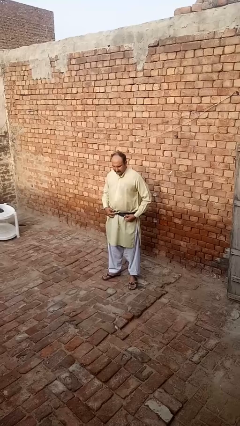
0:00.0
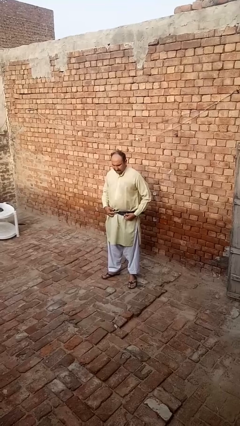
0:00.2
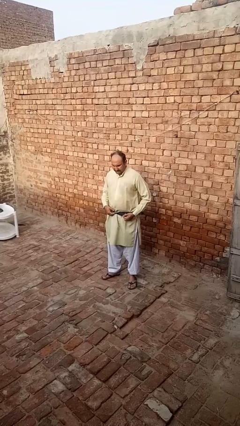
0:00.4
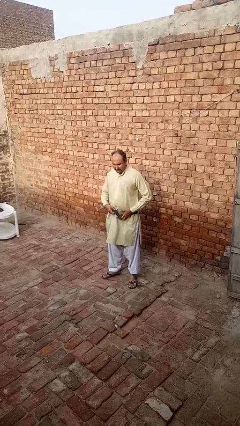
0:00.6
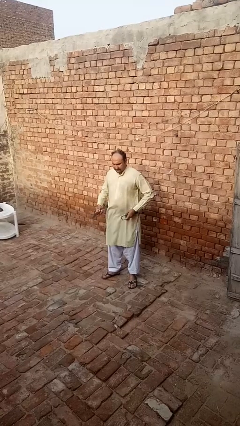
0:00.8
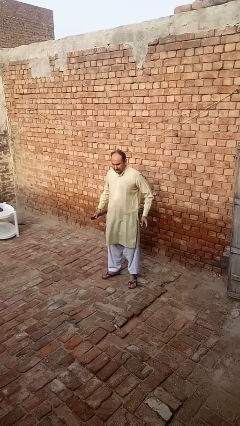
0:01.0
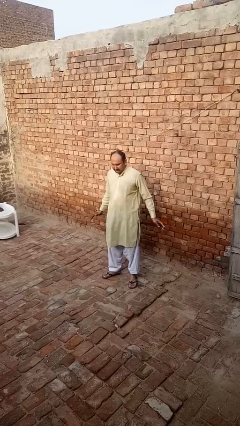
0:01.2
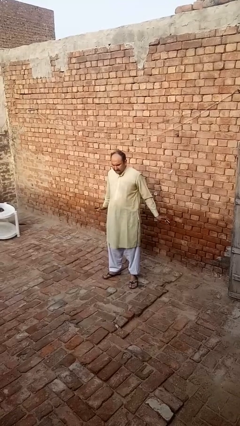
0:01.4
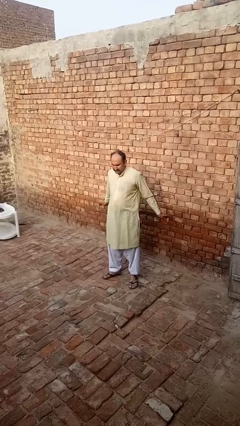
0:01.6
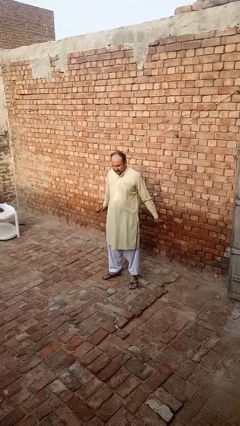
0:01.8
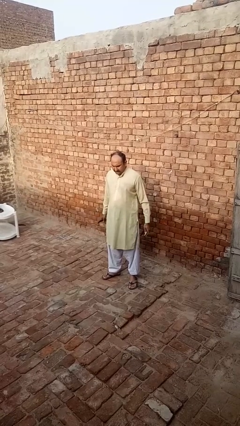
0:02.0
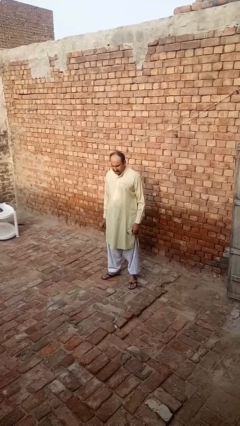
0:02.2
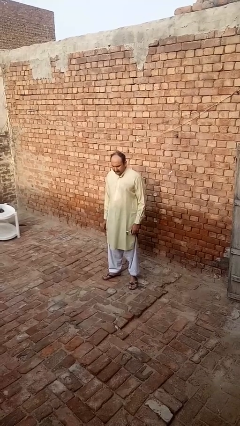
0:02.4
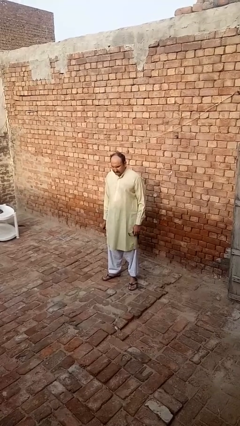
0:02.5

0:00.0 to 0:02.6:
person takes off belt

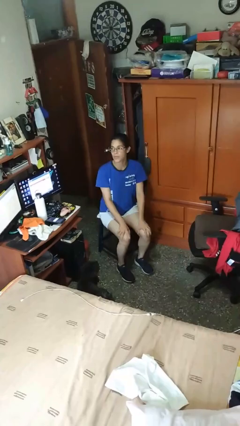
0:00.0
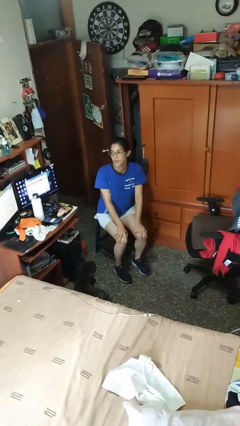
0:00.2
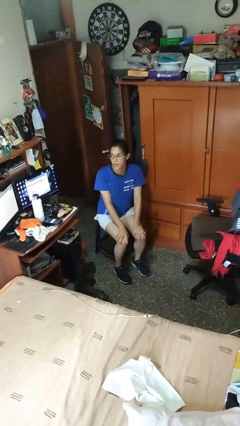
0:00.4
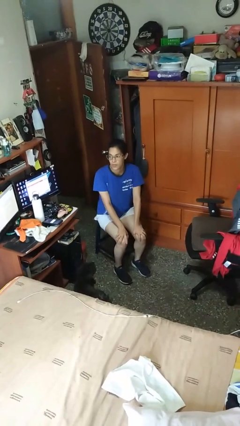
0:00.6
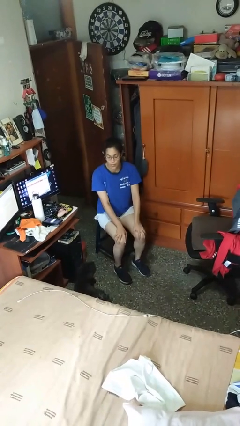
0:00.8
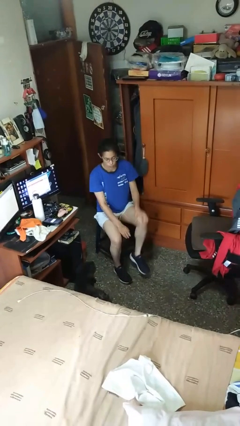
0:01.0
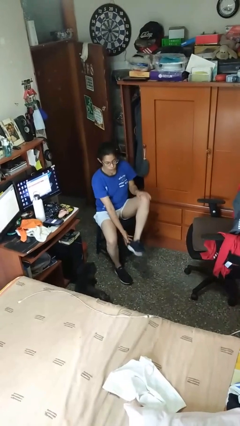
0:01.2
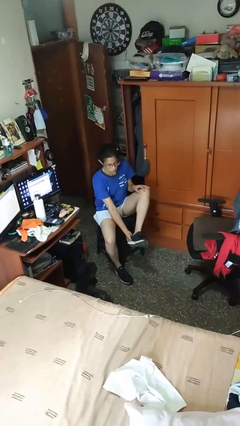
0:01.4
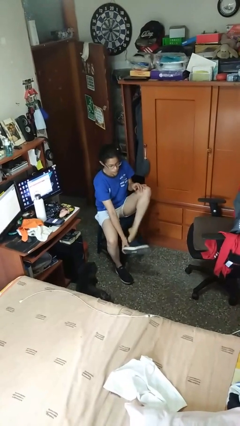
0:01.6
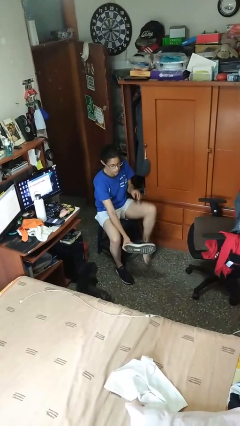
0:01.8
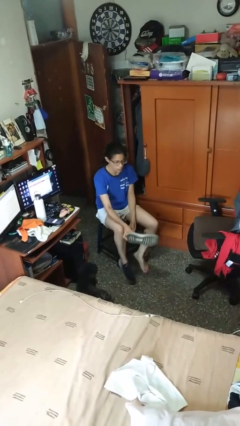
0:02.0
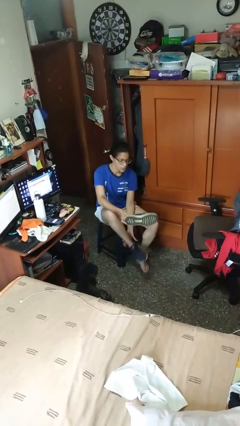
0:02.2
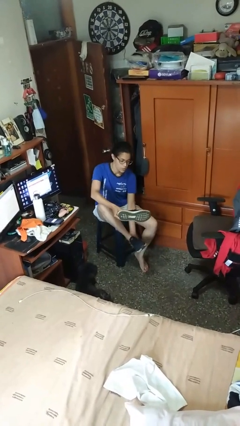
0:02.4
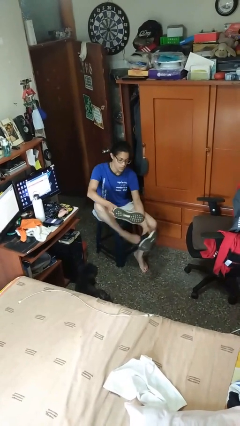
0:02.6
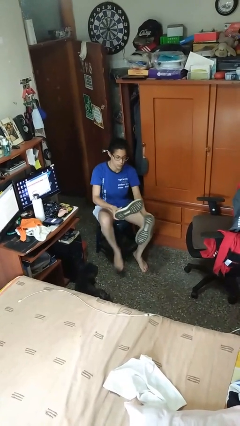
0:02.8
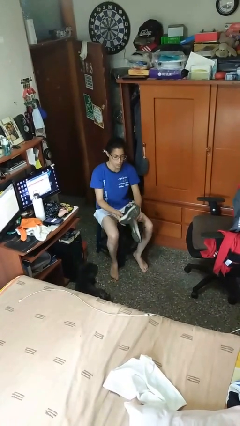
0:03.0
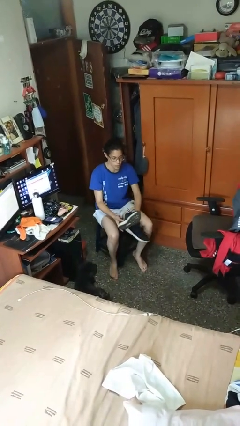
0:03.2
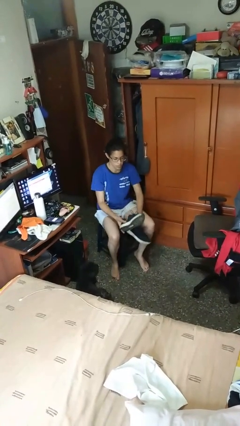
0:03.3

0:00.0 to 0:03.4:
person takes off shoes

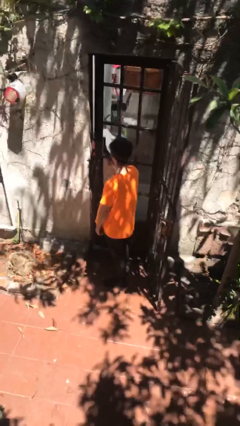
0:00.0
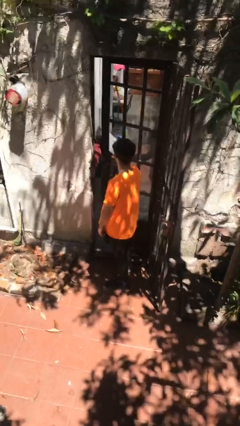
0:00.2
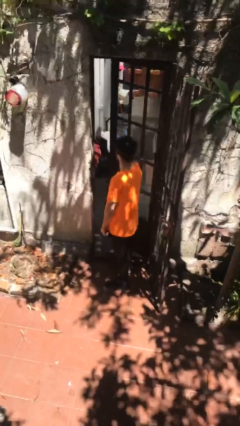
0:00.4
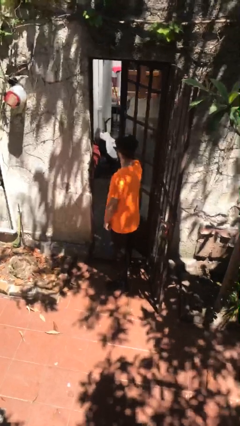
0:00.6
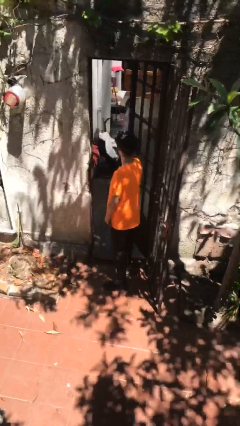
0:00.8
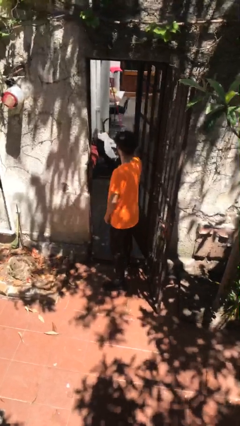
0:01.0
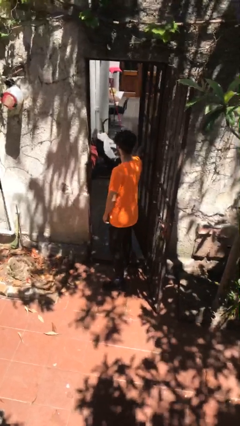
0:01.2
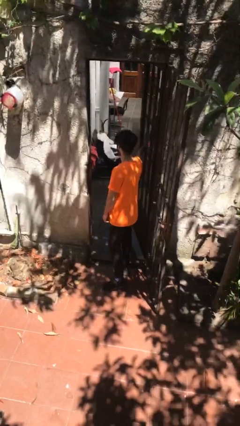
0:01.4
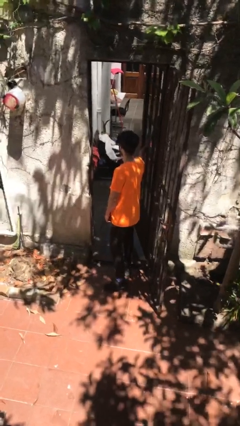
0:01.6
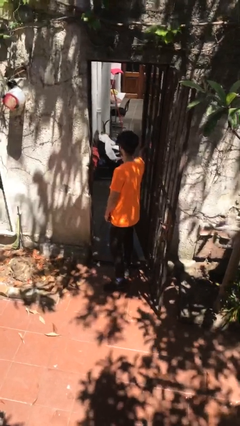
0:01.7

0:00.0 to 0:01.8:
person opens facility door

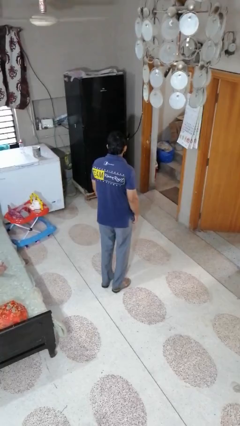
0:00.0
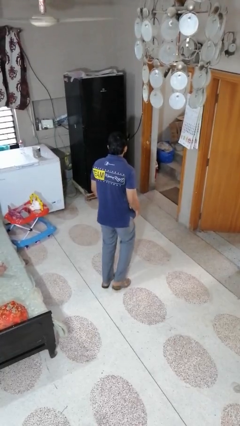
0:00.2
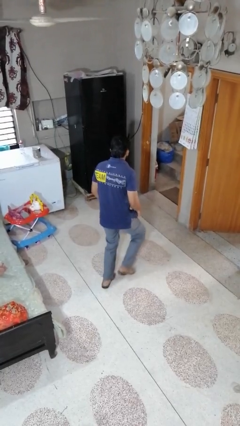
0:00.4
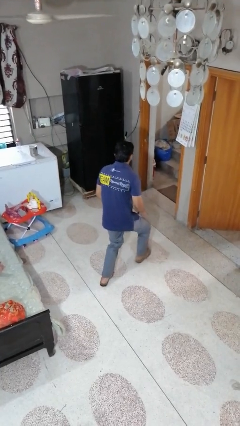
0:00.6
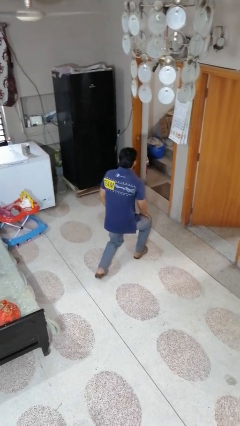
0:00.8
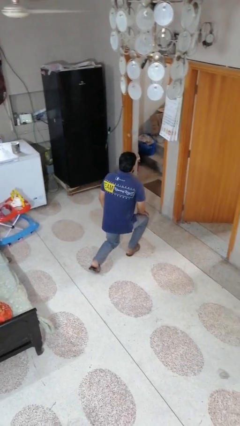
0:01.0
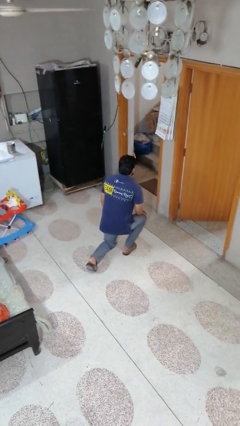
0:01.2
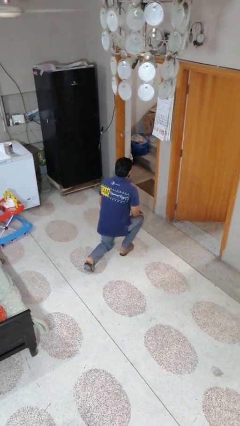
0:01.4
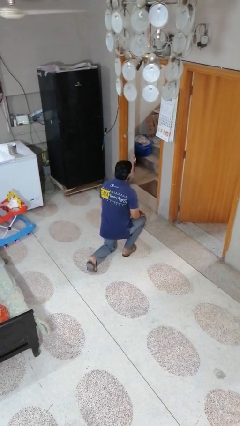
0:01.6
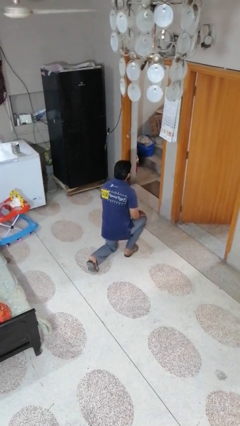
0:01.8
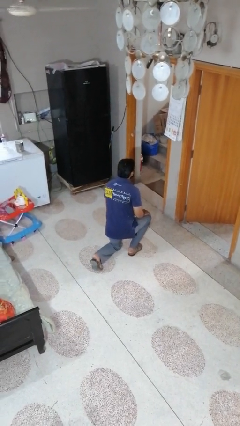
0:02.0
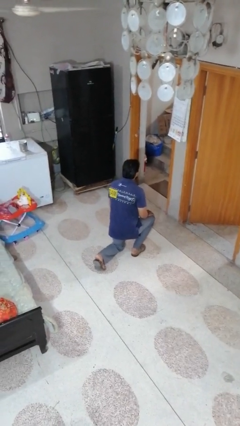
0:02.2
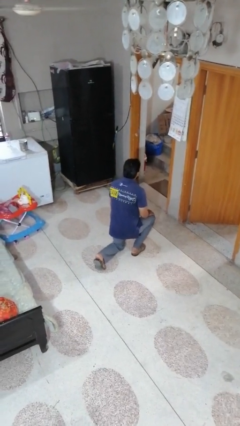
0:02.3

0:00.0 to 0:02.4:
person kneels

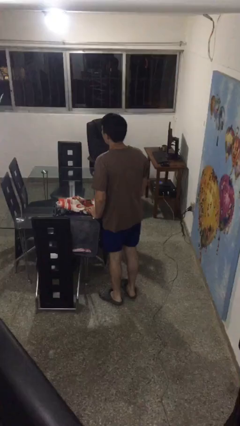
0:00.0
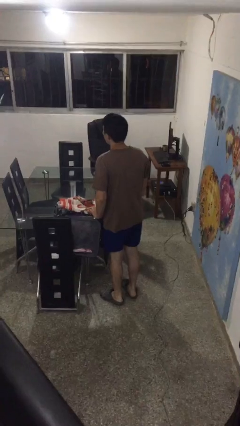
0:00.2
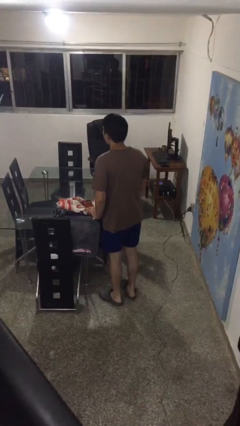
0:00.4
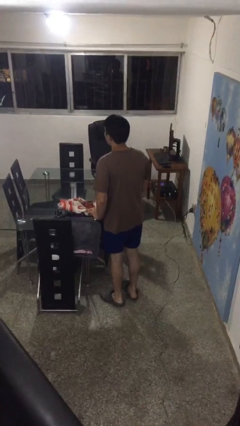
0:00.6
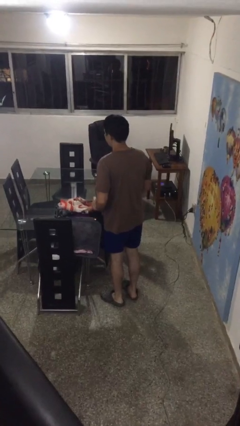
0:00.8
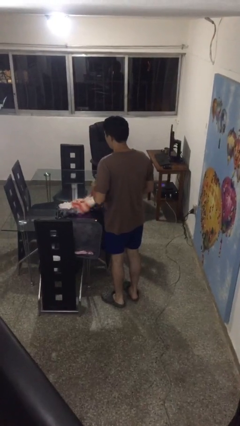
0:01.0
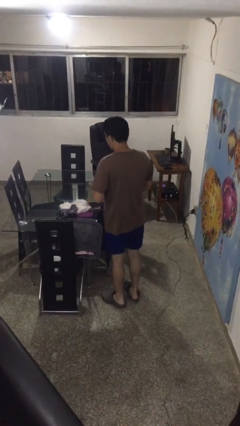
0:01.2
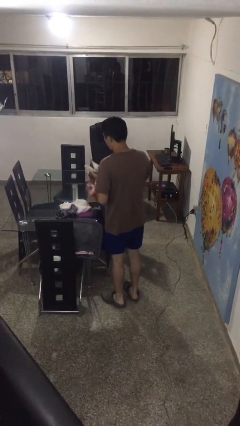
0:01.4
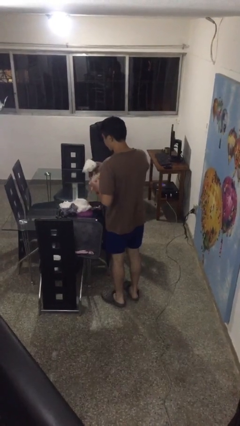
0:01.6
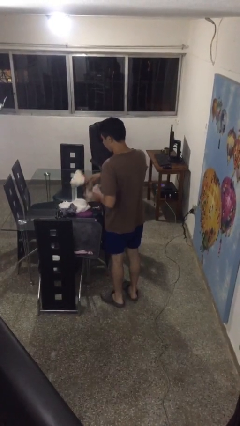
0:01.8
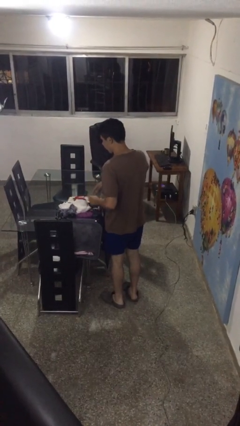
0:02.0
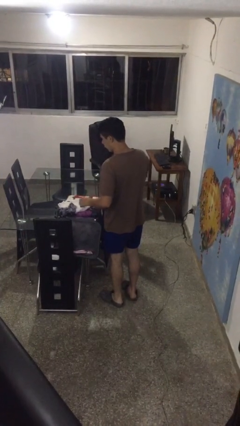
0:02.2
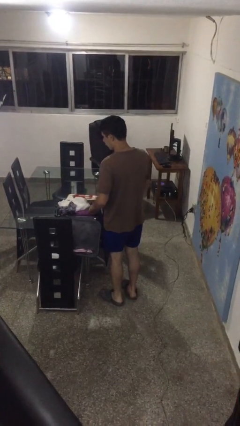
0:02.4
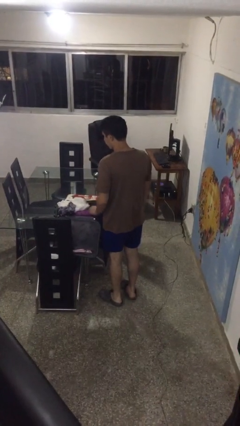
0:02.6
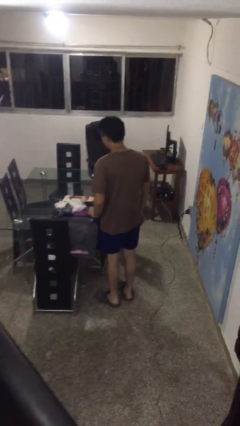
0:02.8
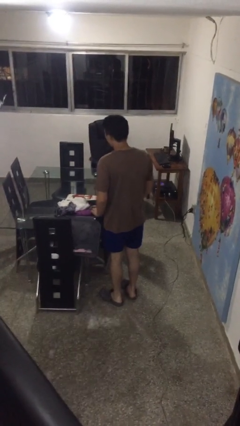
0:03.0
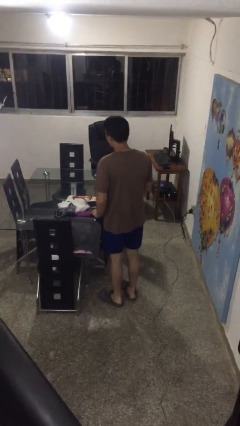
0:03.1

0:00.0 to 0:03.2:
person unloads clothes from suitcase

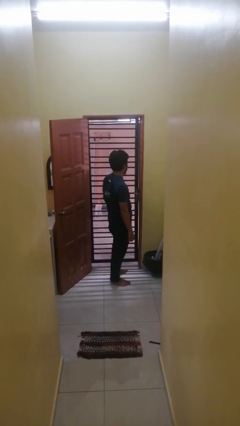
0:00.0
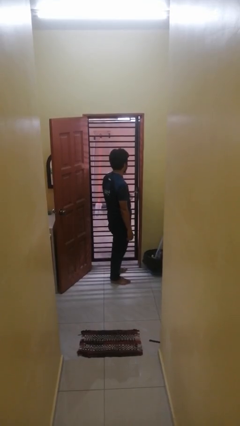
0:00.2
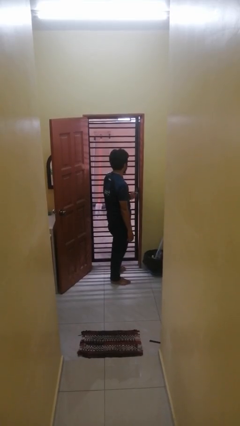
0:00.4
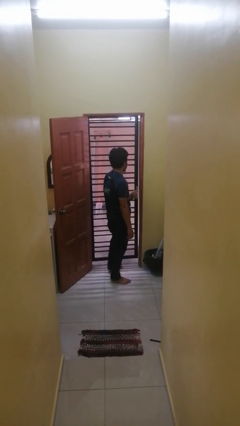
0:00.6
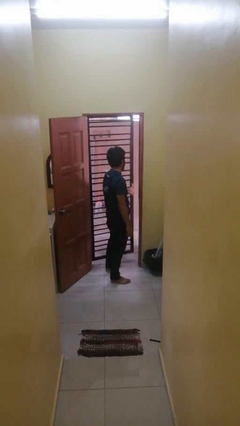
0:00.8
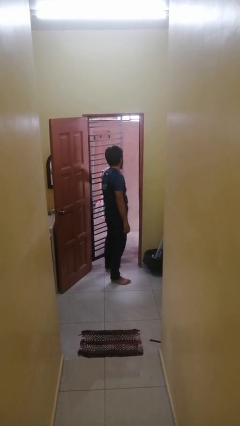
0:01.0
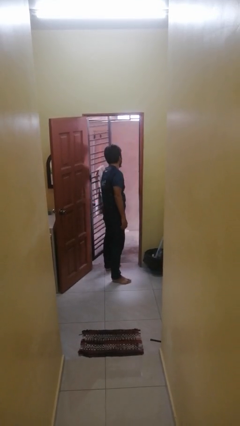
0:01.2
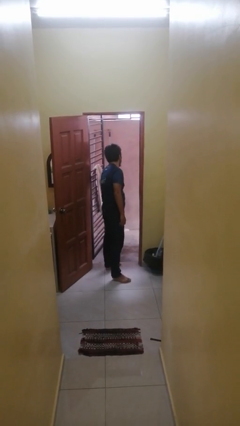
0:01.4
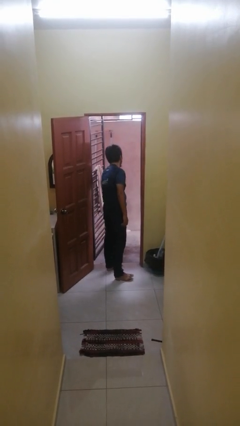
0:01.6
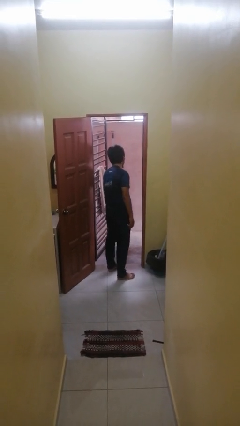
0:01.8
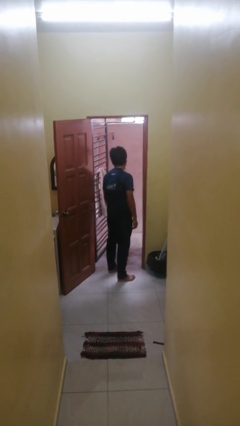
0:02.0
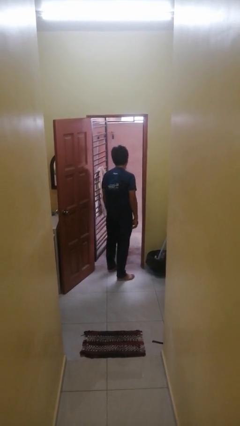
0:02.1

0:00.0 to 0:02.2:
person opens gate

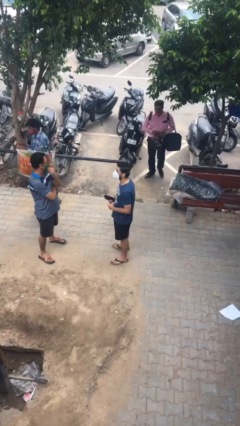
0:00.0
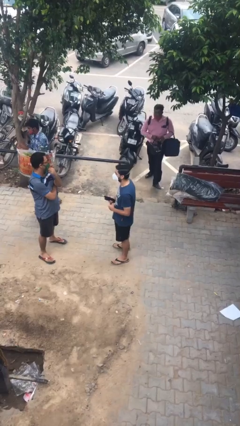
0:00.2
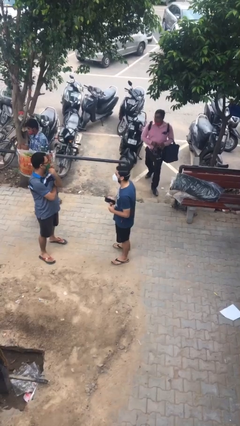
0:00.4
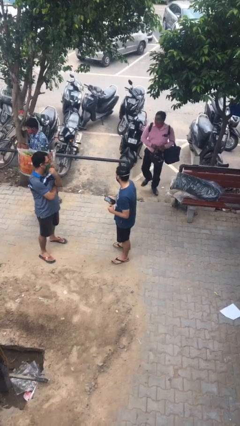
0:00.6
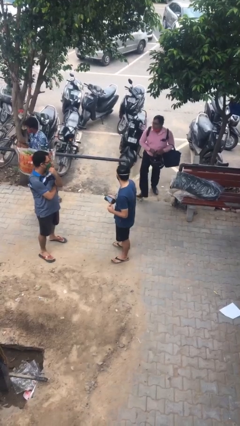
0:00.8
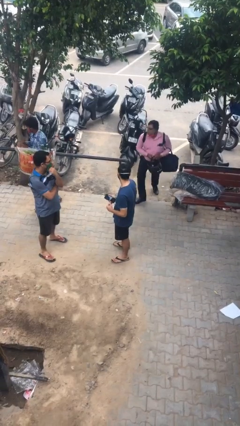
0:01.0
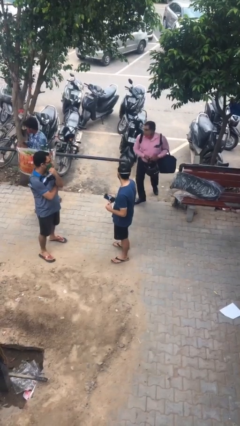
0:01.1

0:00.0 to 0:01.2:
person talks to person

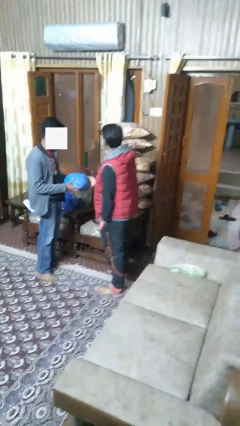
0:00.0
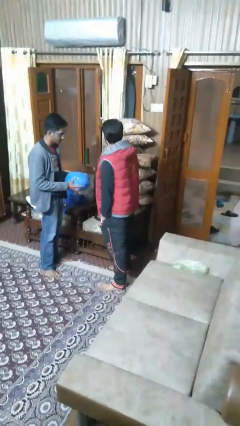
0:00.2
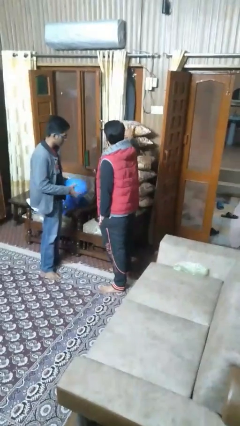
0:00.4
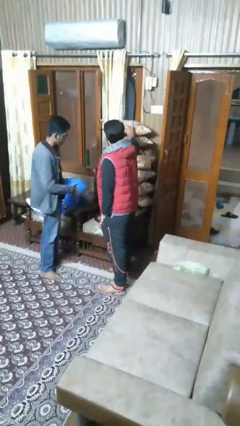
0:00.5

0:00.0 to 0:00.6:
person transfers object to person
